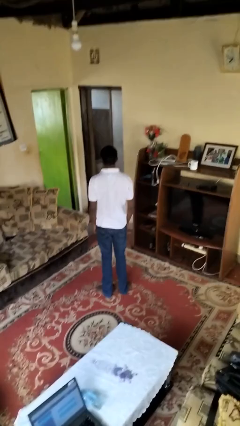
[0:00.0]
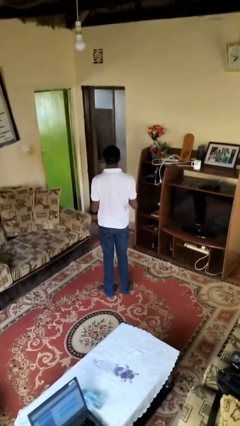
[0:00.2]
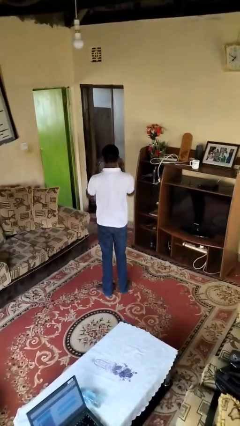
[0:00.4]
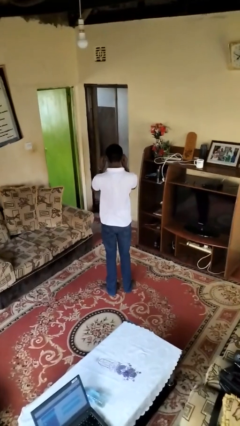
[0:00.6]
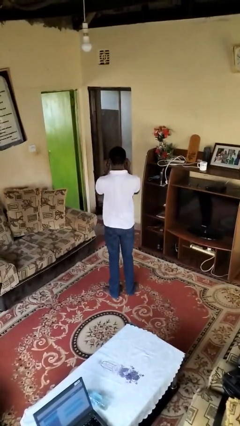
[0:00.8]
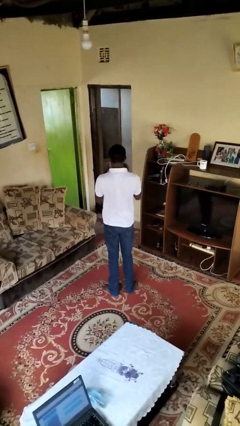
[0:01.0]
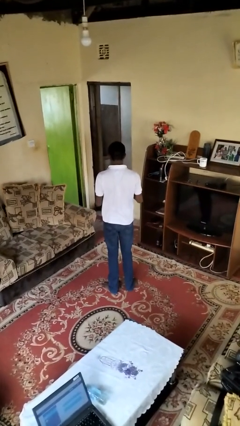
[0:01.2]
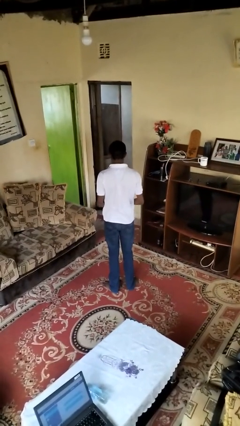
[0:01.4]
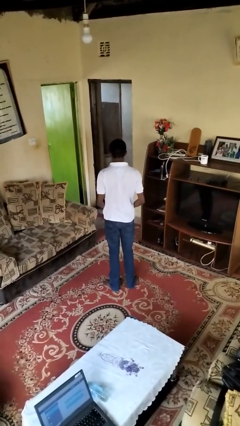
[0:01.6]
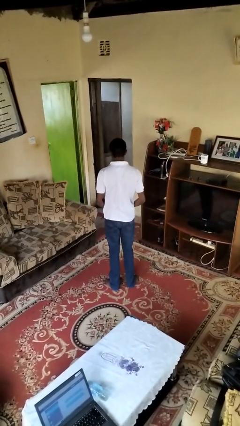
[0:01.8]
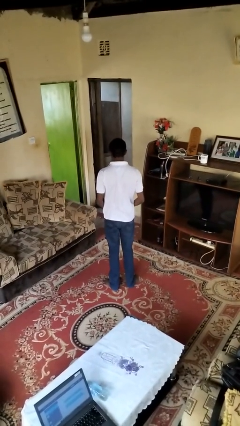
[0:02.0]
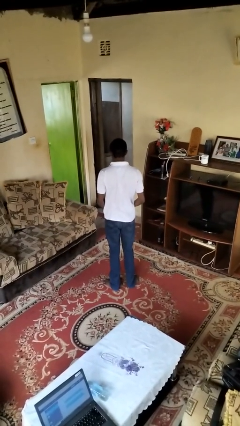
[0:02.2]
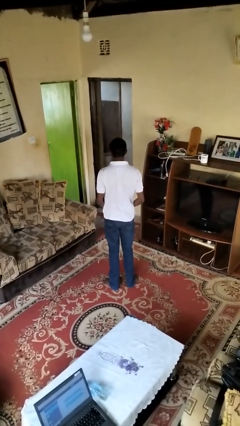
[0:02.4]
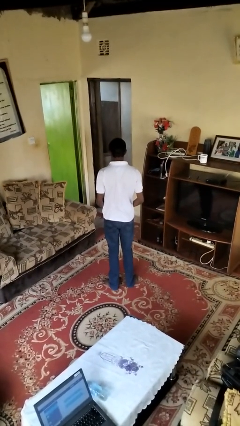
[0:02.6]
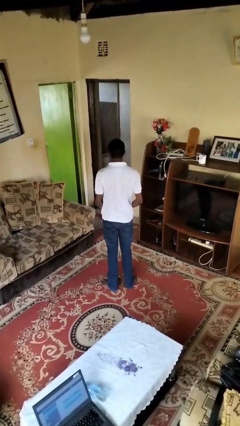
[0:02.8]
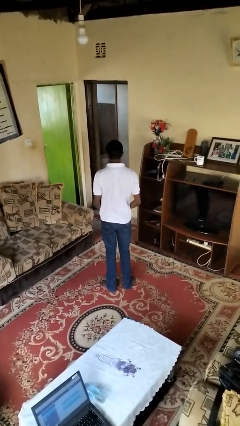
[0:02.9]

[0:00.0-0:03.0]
person takes off sunglasses

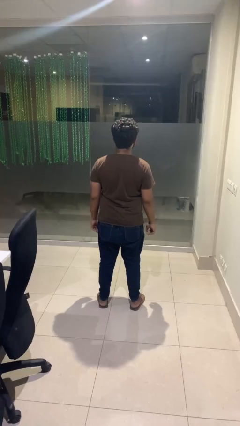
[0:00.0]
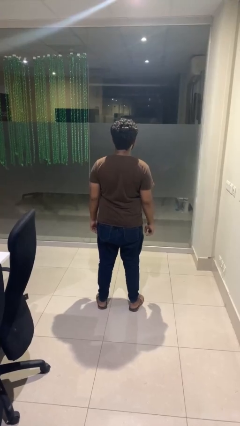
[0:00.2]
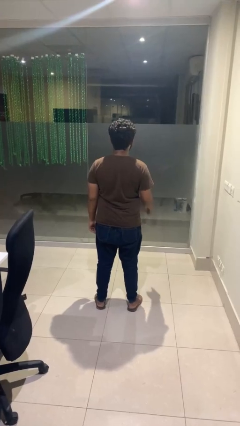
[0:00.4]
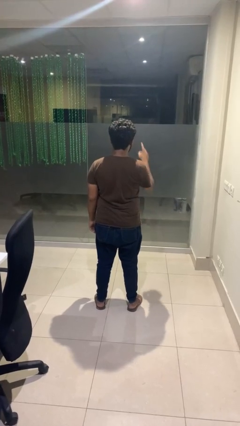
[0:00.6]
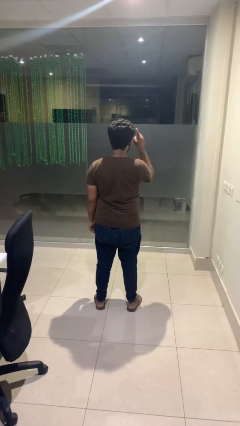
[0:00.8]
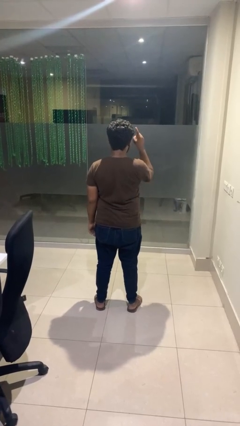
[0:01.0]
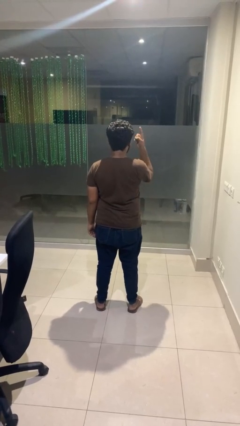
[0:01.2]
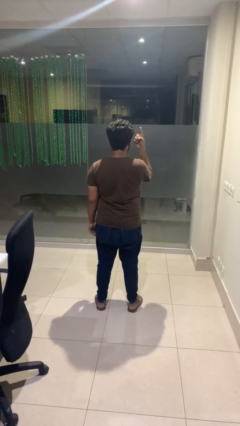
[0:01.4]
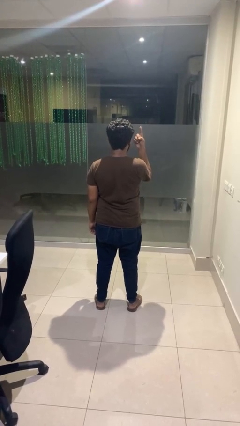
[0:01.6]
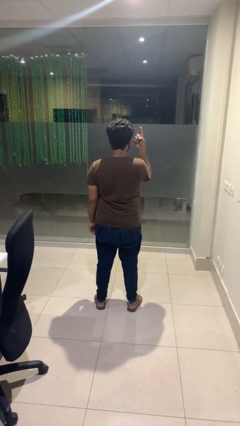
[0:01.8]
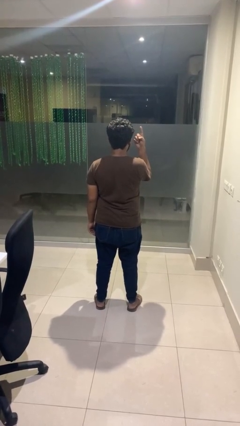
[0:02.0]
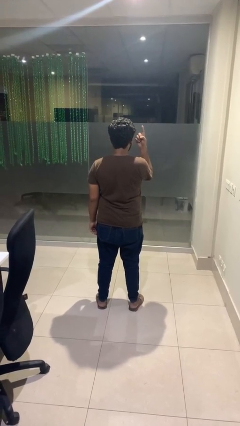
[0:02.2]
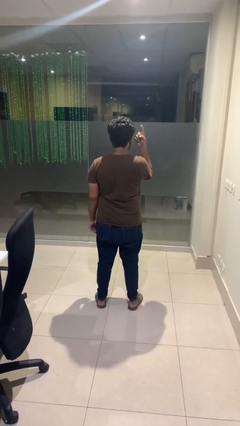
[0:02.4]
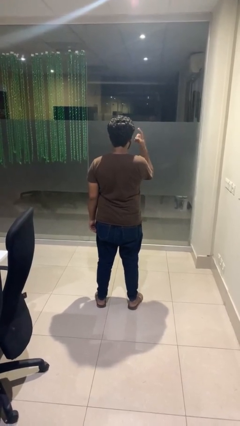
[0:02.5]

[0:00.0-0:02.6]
person gestures number one

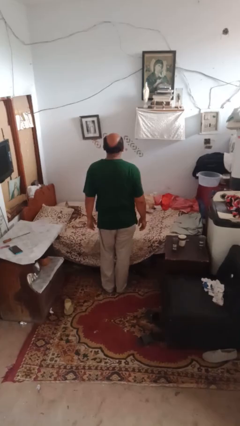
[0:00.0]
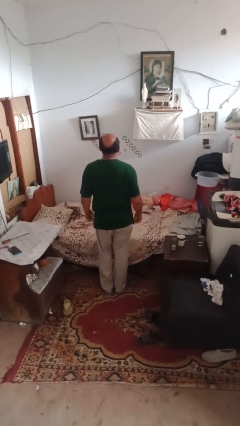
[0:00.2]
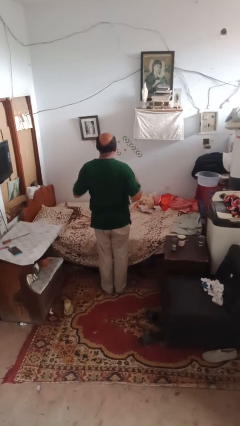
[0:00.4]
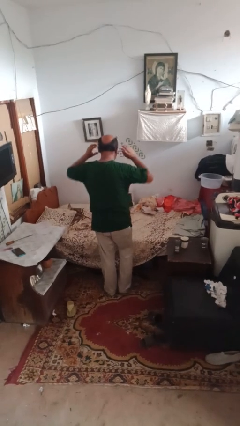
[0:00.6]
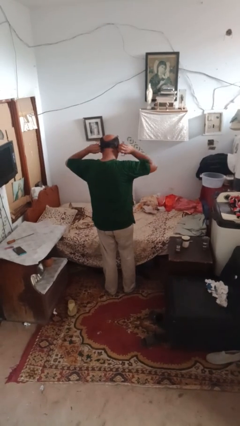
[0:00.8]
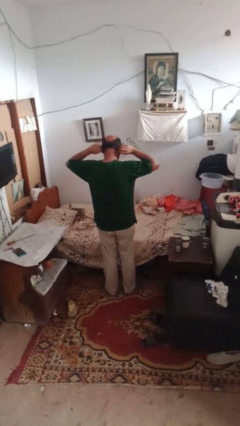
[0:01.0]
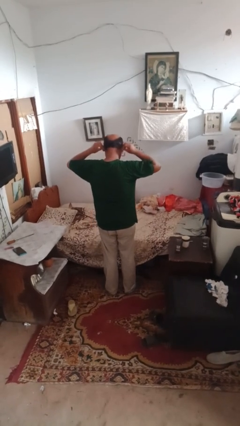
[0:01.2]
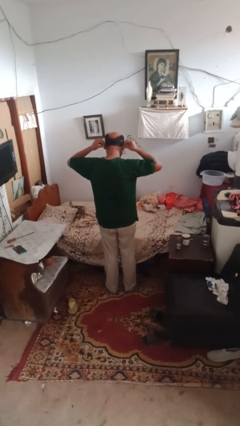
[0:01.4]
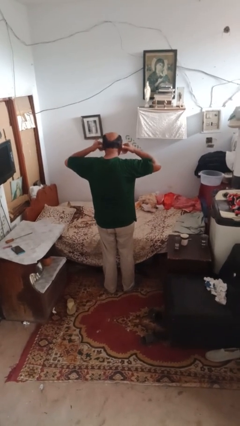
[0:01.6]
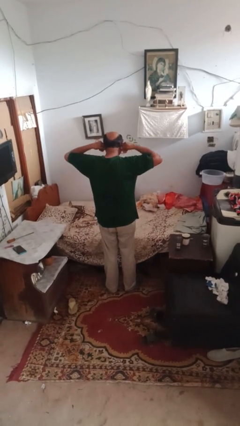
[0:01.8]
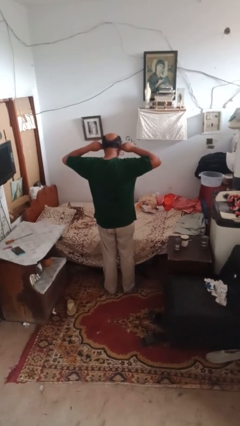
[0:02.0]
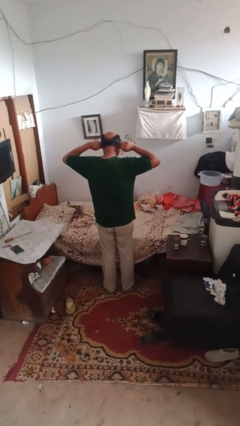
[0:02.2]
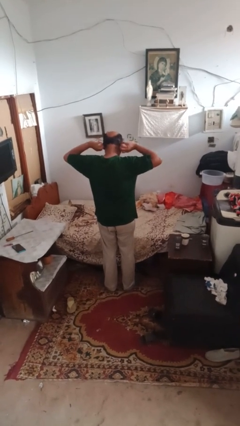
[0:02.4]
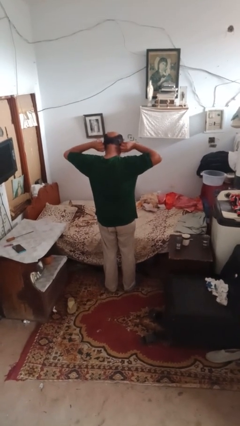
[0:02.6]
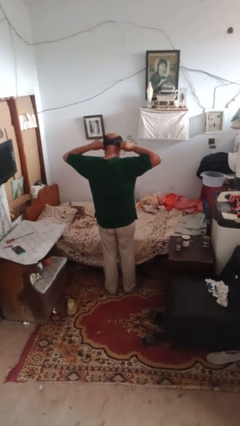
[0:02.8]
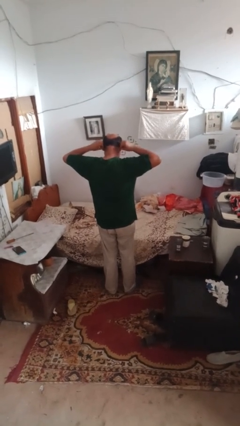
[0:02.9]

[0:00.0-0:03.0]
person touches earlobe

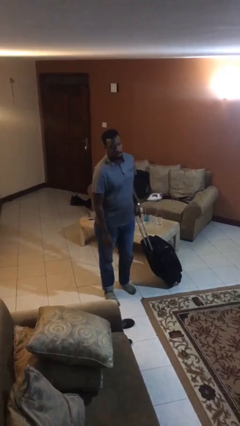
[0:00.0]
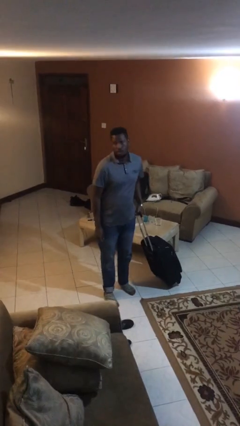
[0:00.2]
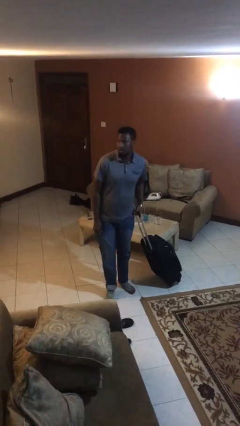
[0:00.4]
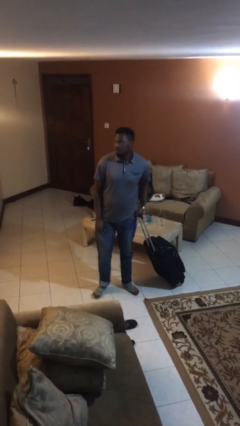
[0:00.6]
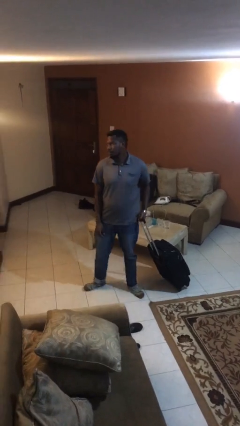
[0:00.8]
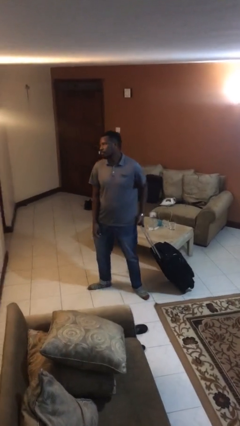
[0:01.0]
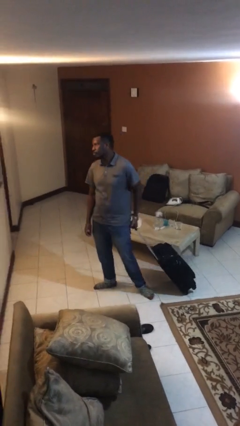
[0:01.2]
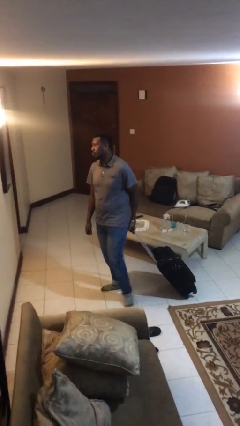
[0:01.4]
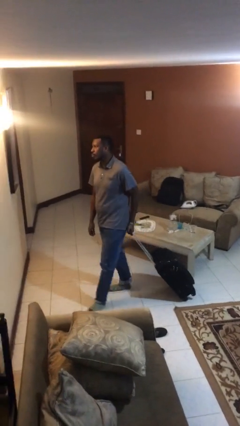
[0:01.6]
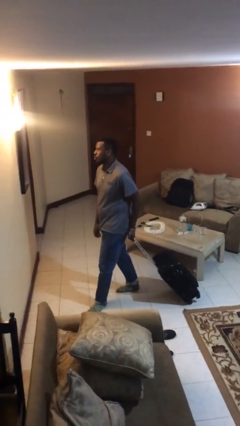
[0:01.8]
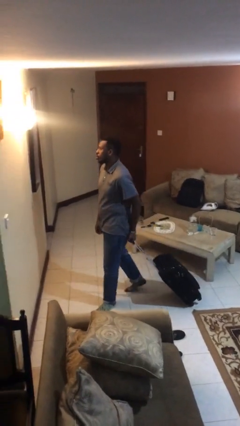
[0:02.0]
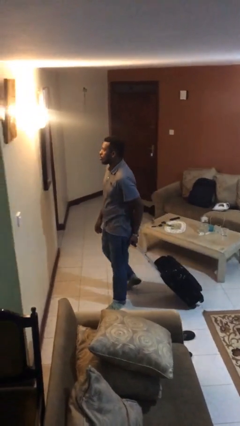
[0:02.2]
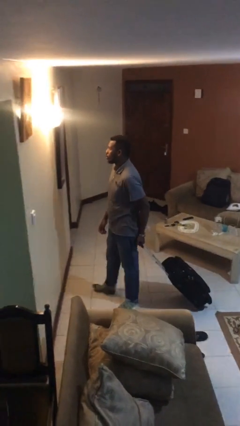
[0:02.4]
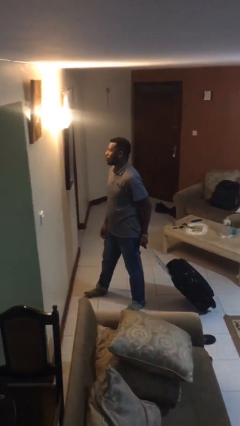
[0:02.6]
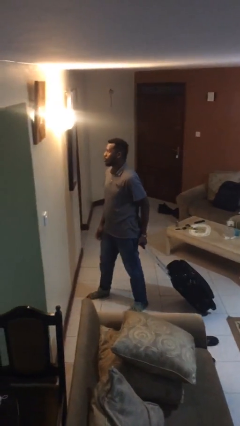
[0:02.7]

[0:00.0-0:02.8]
person pulls wheeled cart

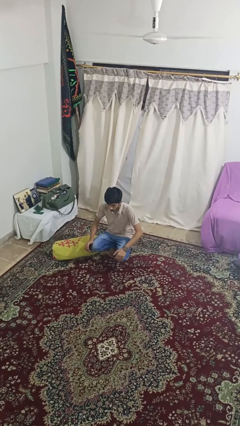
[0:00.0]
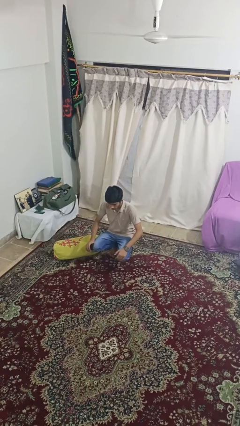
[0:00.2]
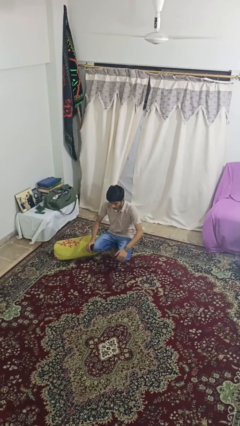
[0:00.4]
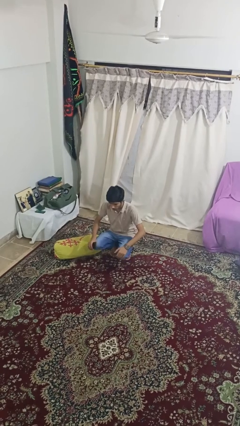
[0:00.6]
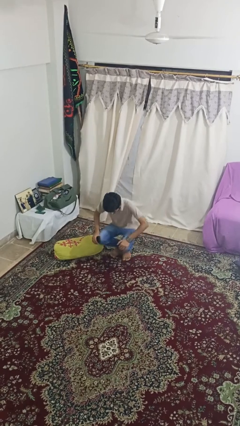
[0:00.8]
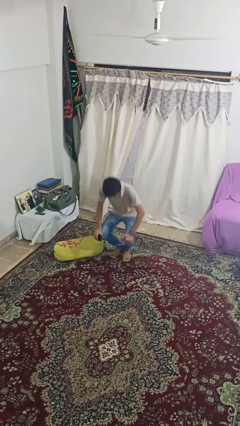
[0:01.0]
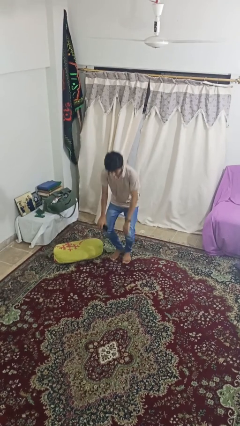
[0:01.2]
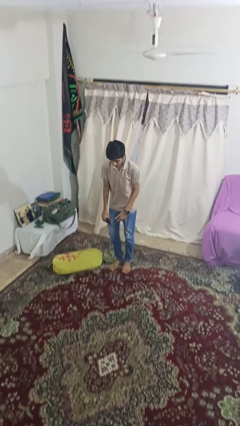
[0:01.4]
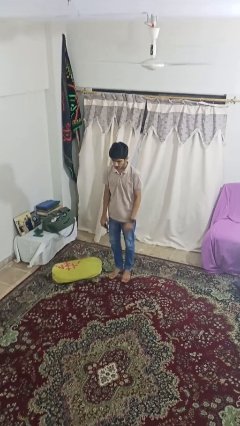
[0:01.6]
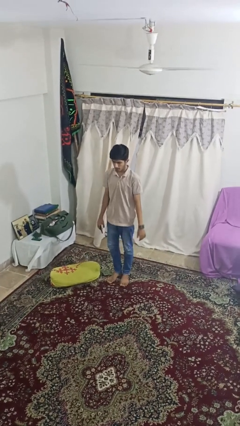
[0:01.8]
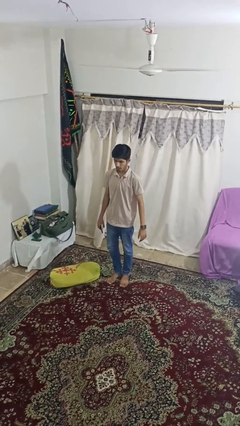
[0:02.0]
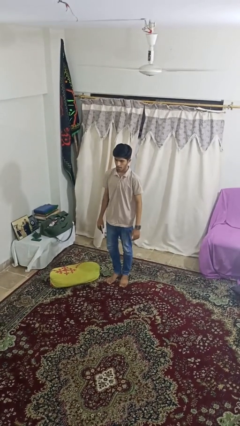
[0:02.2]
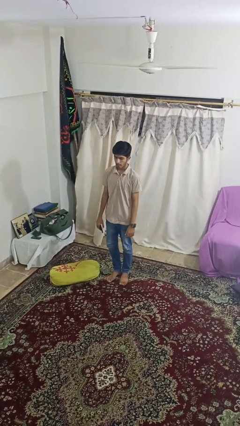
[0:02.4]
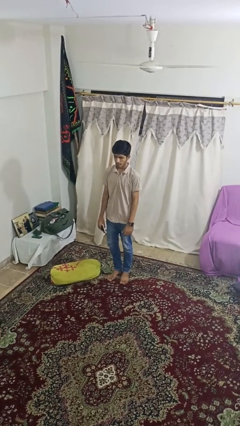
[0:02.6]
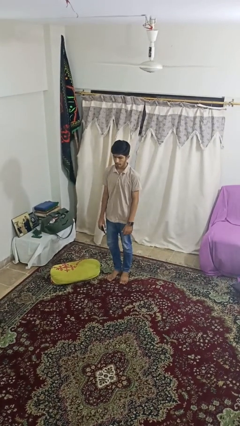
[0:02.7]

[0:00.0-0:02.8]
person stands up

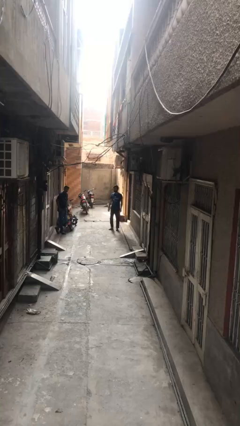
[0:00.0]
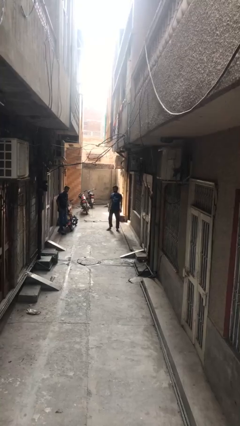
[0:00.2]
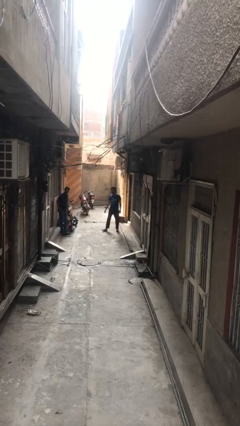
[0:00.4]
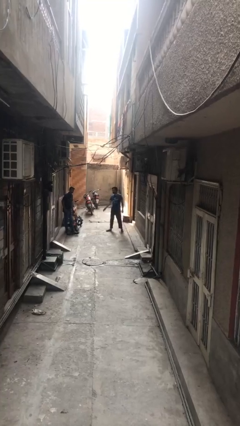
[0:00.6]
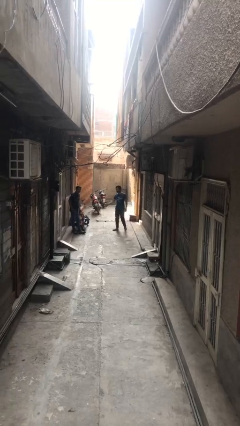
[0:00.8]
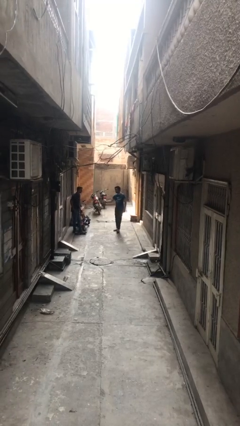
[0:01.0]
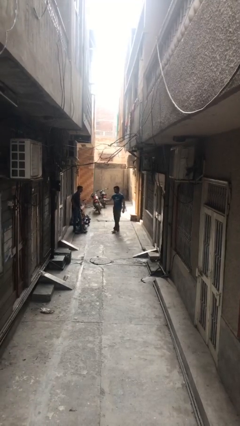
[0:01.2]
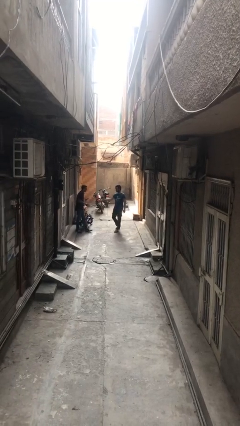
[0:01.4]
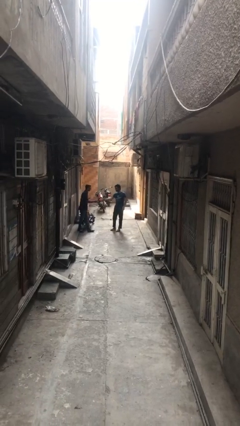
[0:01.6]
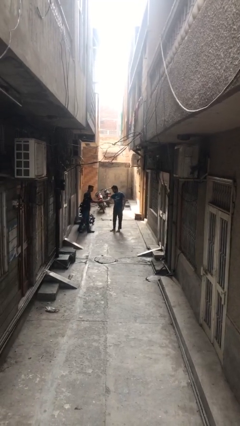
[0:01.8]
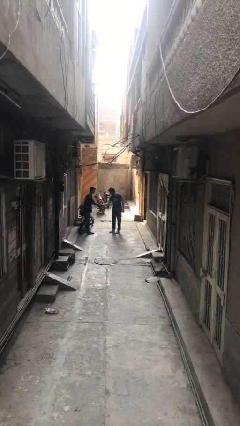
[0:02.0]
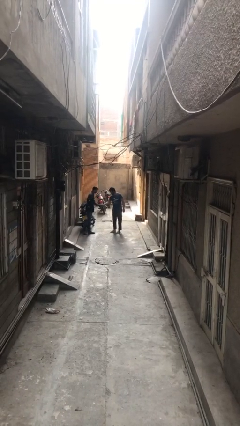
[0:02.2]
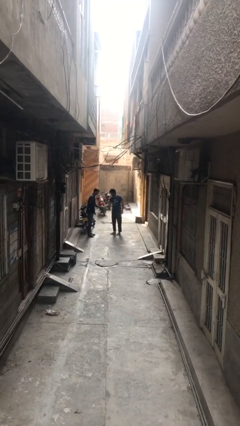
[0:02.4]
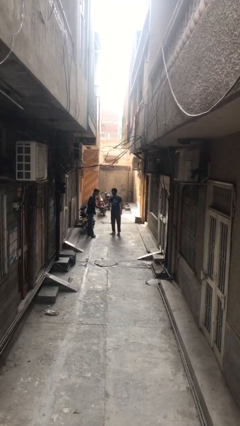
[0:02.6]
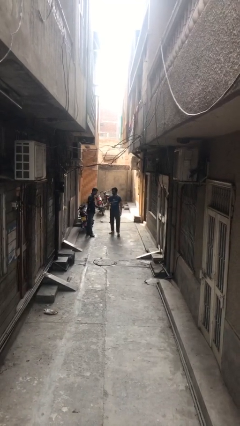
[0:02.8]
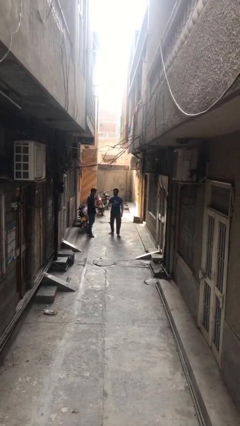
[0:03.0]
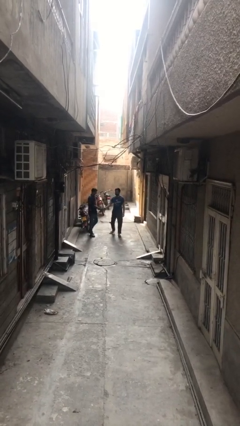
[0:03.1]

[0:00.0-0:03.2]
person shakes hand
